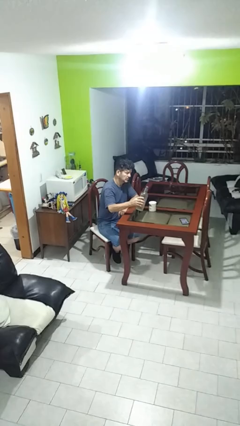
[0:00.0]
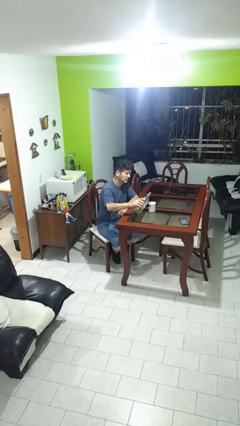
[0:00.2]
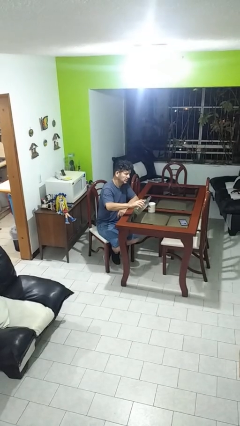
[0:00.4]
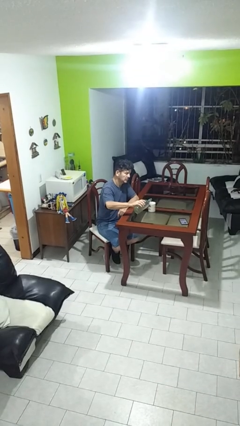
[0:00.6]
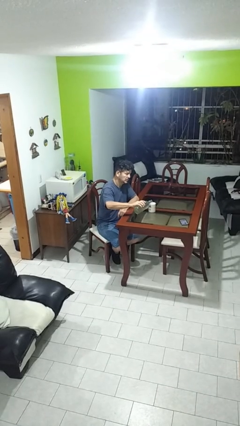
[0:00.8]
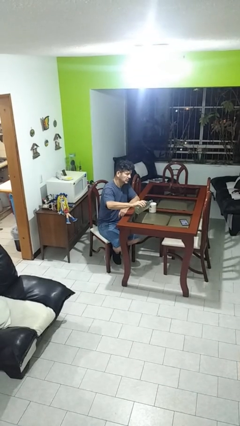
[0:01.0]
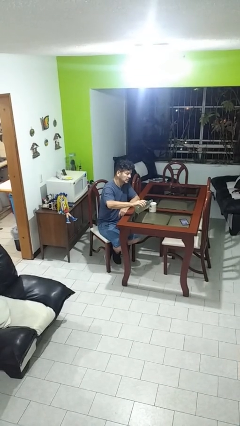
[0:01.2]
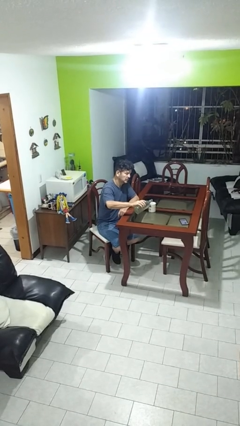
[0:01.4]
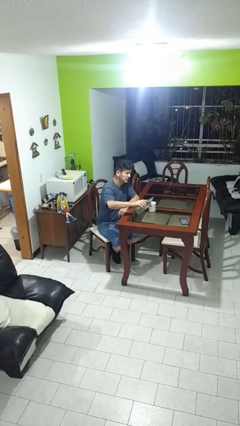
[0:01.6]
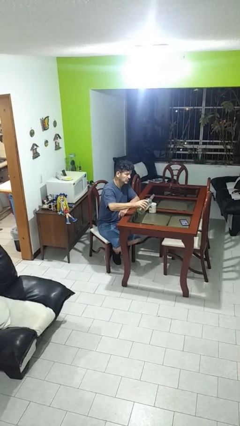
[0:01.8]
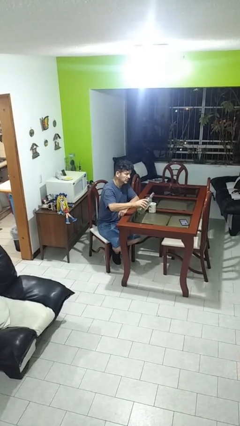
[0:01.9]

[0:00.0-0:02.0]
person pours liquid into cup

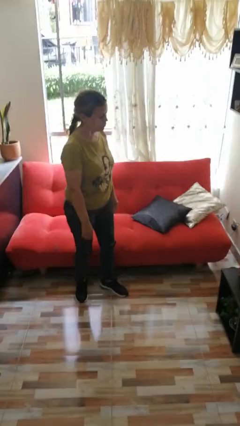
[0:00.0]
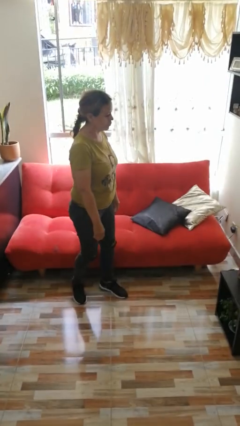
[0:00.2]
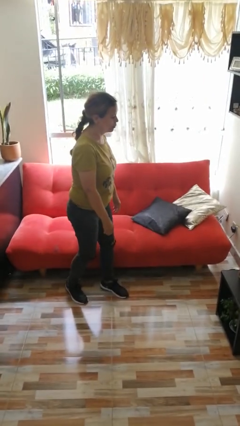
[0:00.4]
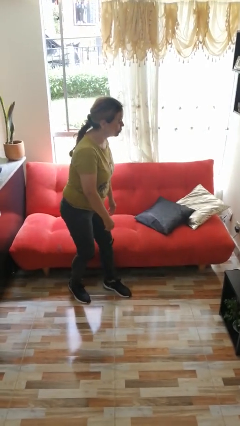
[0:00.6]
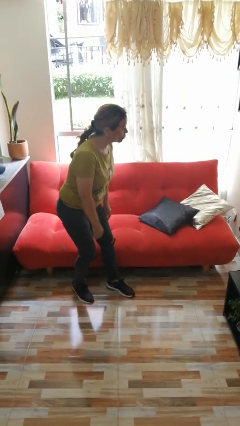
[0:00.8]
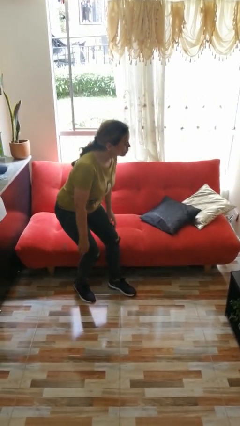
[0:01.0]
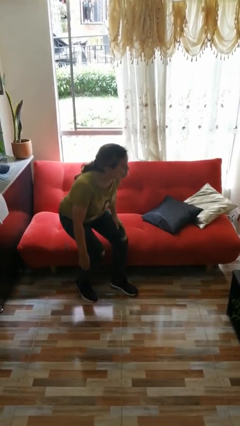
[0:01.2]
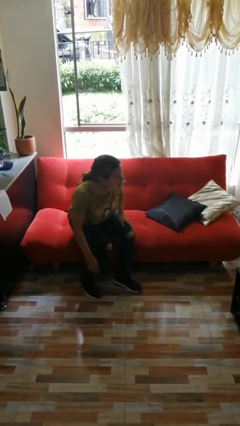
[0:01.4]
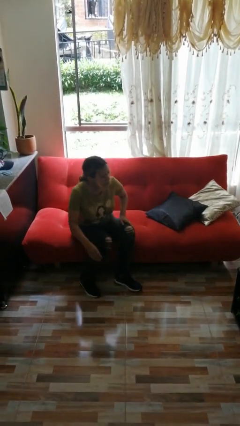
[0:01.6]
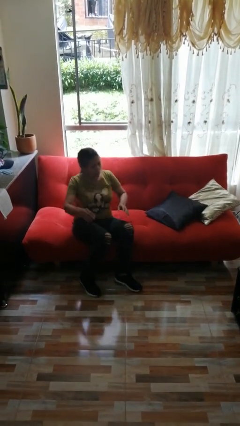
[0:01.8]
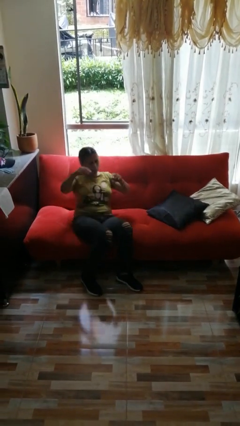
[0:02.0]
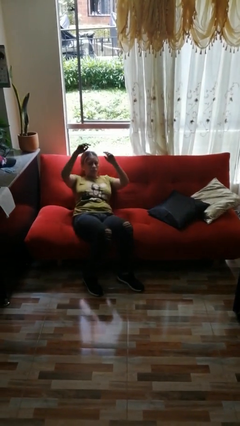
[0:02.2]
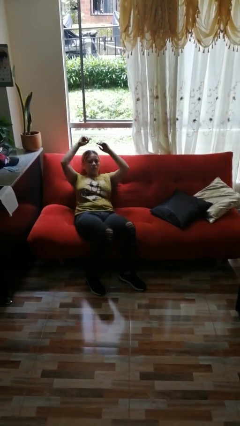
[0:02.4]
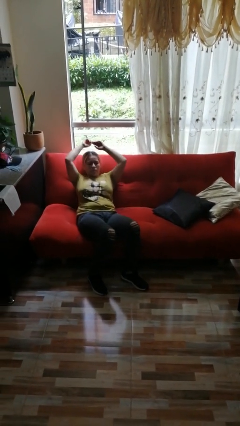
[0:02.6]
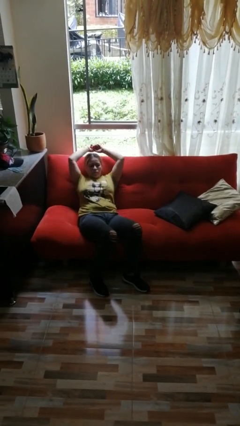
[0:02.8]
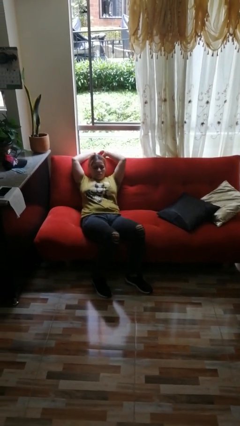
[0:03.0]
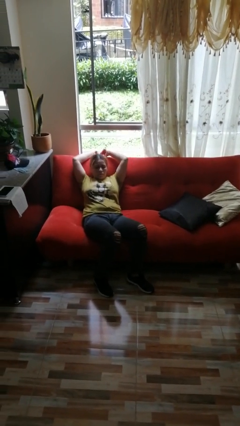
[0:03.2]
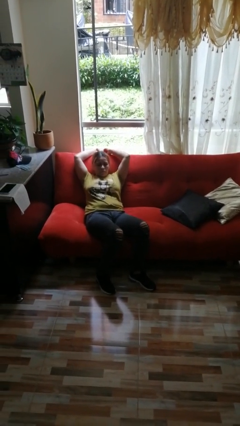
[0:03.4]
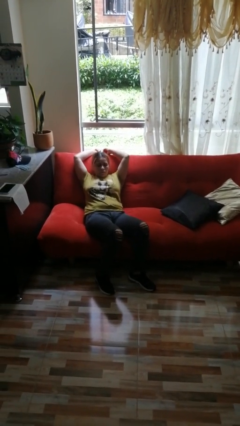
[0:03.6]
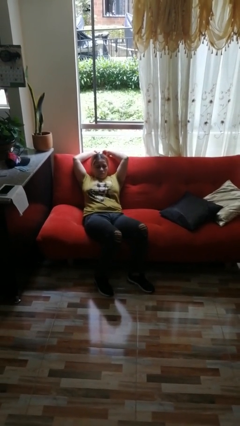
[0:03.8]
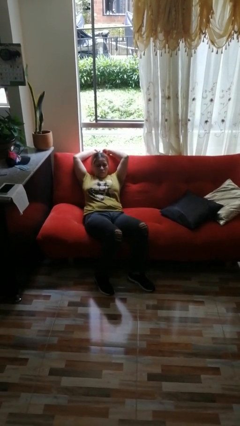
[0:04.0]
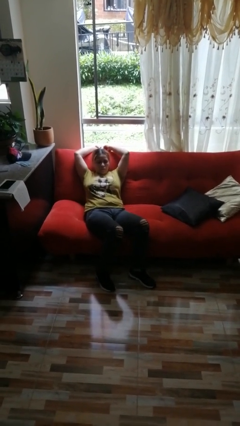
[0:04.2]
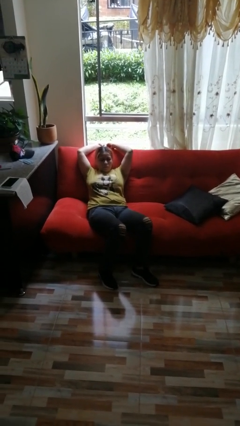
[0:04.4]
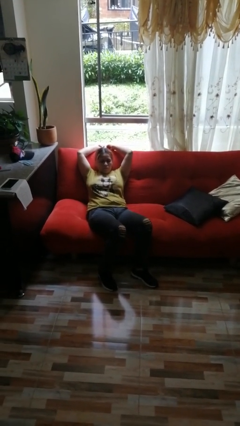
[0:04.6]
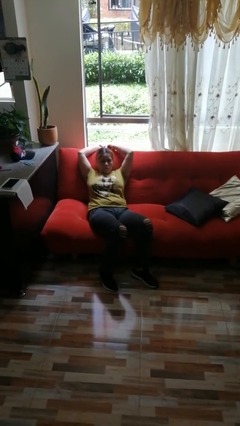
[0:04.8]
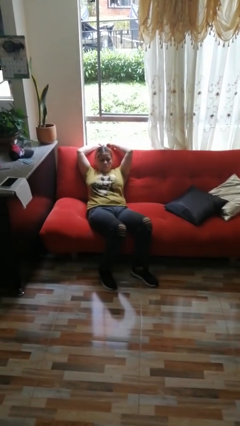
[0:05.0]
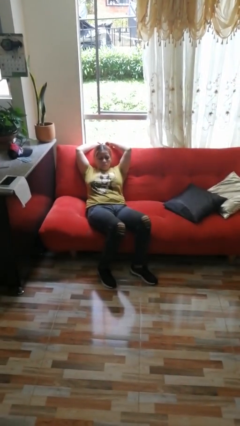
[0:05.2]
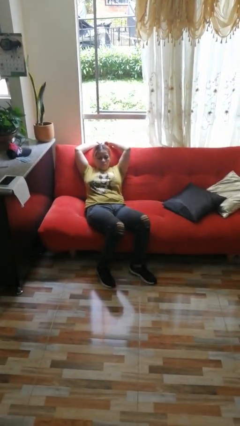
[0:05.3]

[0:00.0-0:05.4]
person lies down on couch

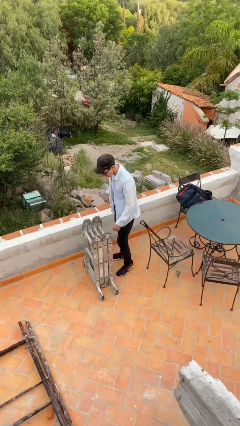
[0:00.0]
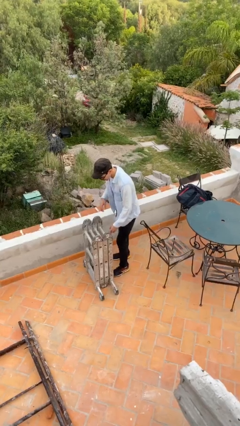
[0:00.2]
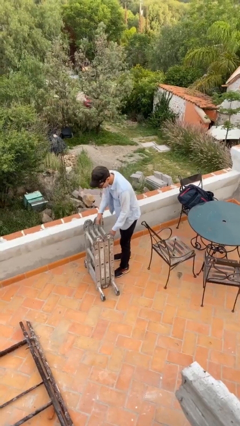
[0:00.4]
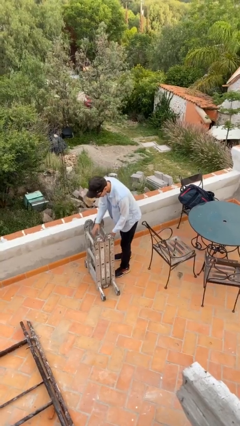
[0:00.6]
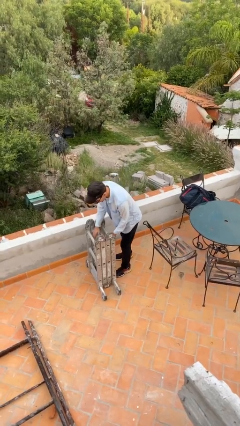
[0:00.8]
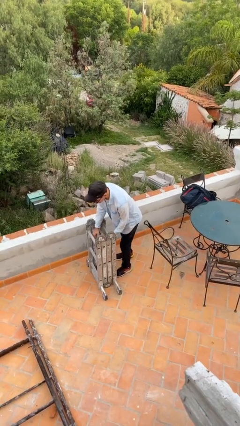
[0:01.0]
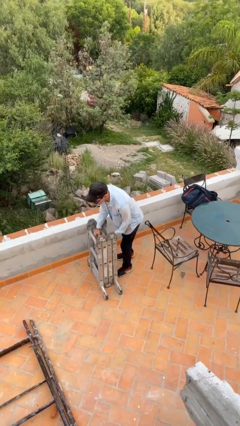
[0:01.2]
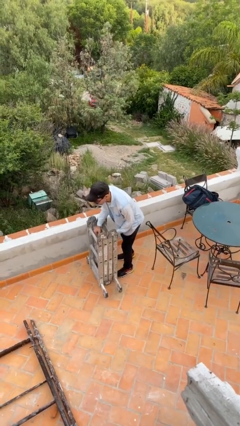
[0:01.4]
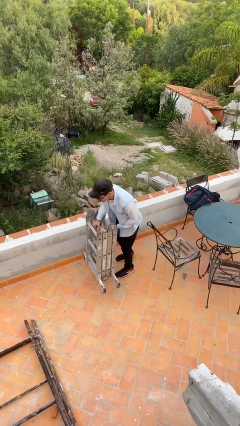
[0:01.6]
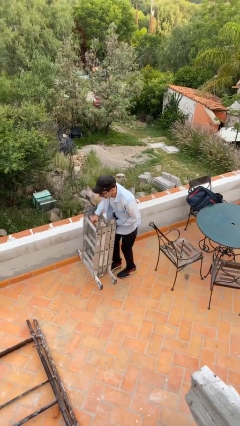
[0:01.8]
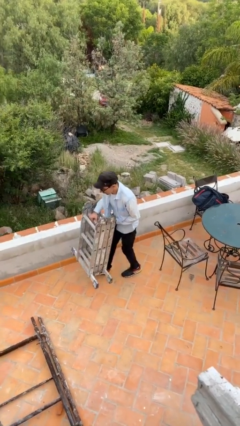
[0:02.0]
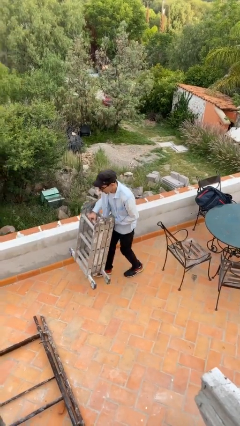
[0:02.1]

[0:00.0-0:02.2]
person picks up object from floor

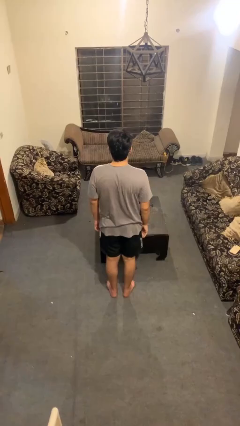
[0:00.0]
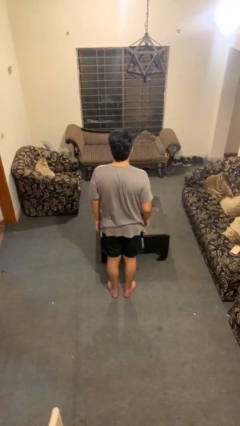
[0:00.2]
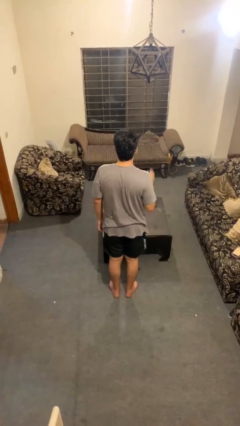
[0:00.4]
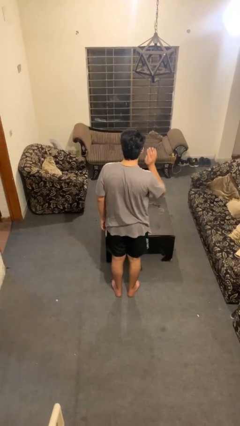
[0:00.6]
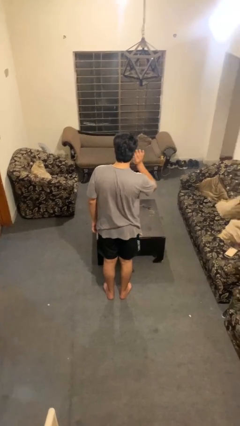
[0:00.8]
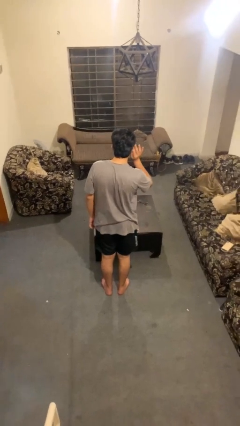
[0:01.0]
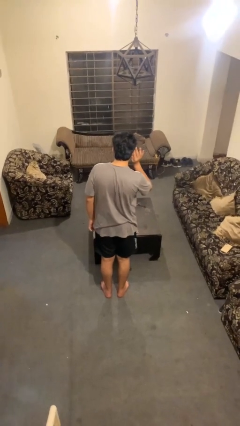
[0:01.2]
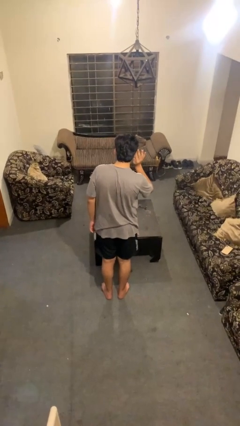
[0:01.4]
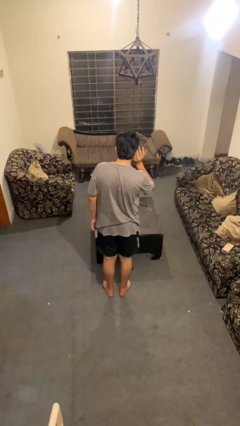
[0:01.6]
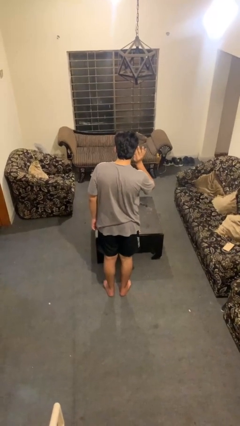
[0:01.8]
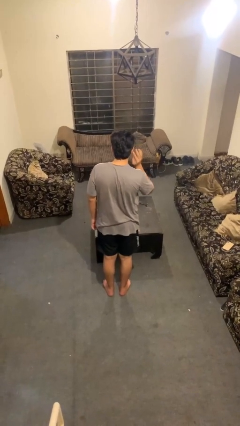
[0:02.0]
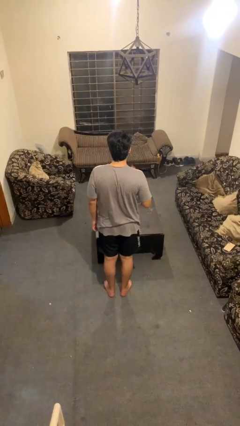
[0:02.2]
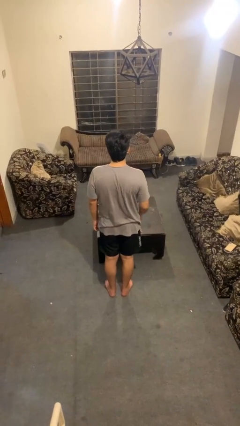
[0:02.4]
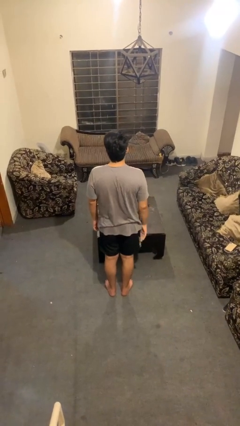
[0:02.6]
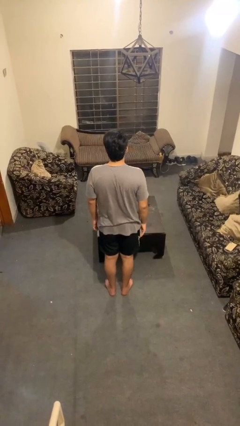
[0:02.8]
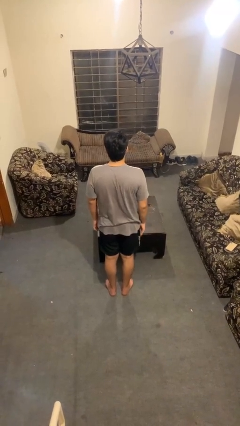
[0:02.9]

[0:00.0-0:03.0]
person gestures listen closely

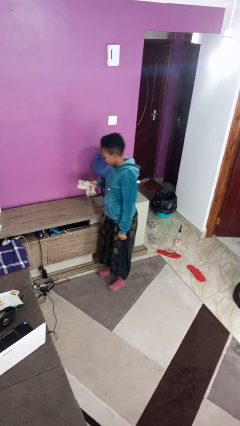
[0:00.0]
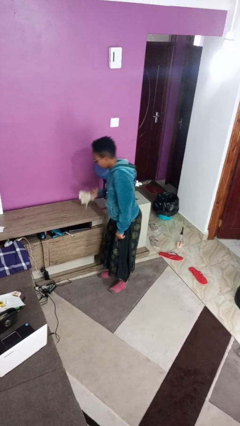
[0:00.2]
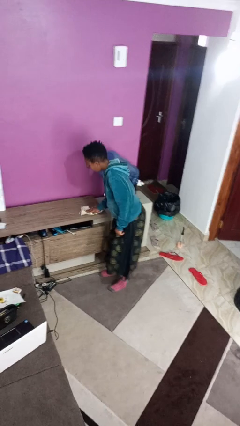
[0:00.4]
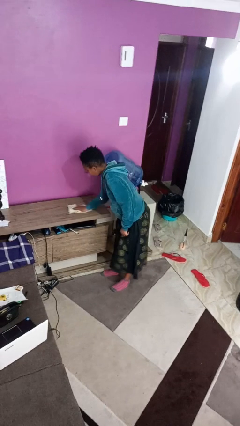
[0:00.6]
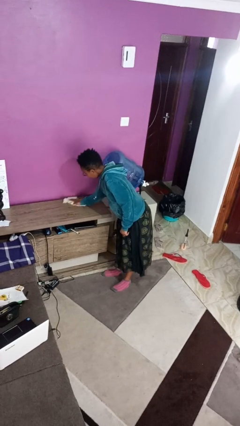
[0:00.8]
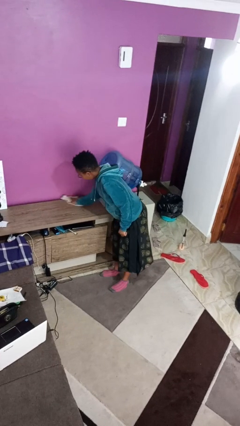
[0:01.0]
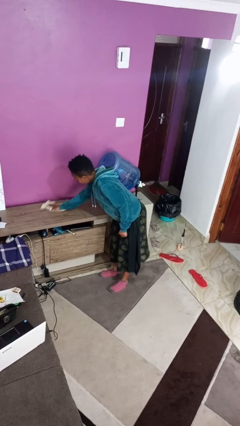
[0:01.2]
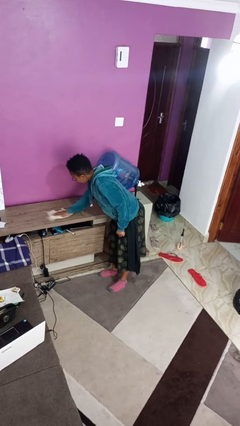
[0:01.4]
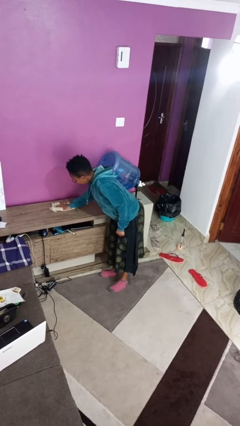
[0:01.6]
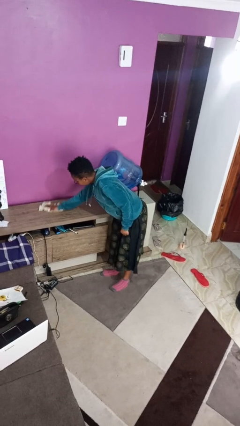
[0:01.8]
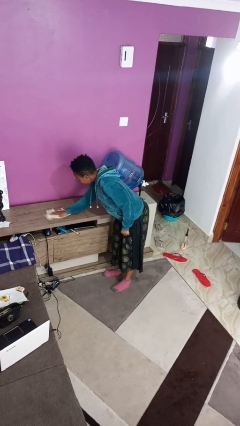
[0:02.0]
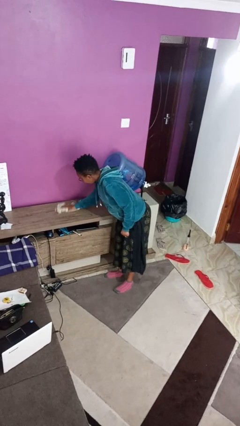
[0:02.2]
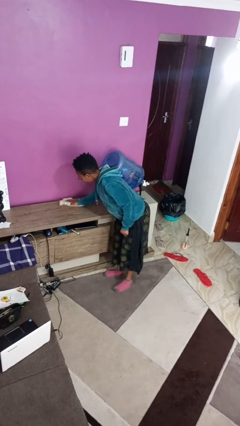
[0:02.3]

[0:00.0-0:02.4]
person cleans table with rag

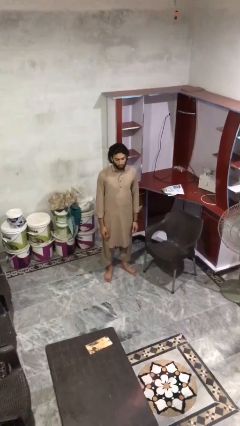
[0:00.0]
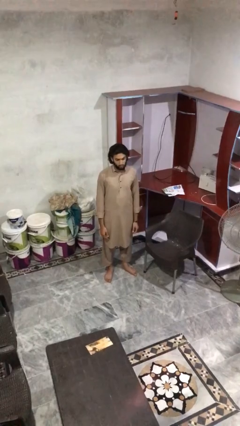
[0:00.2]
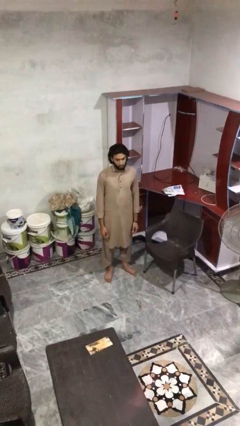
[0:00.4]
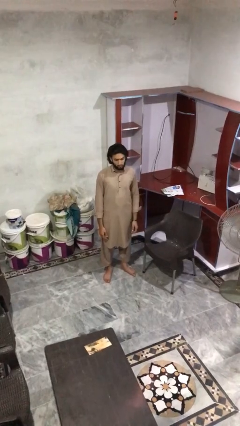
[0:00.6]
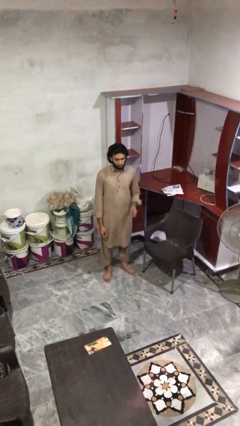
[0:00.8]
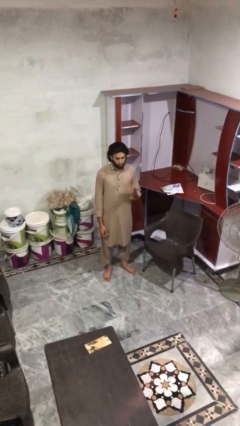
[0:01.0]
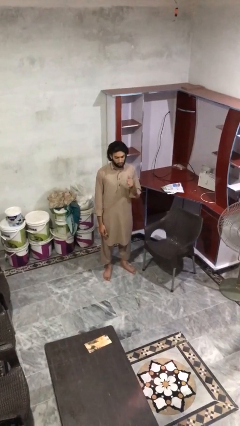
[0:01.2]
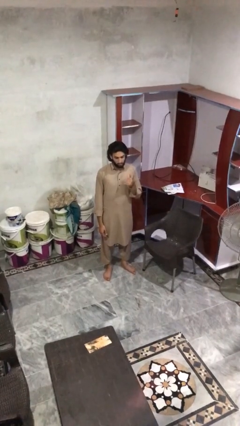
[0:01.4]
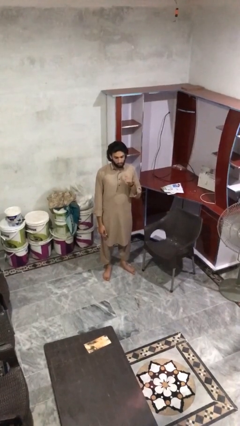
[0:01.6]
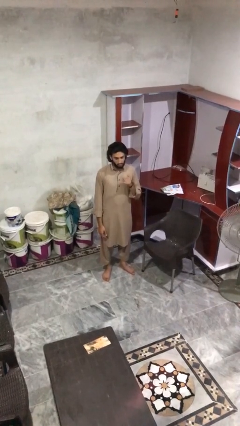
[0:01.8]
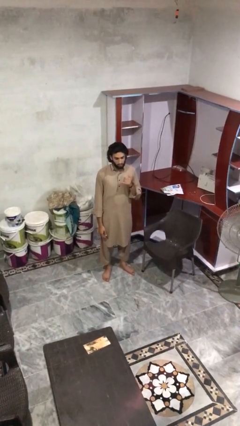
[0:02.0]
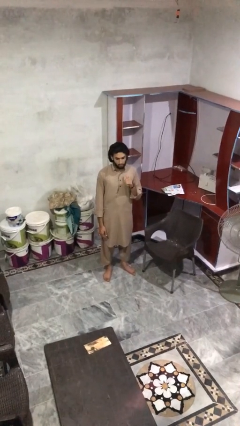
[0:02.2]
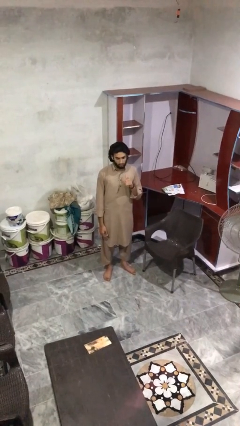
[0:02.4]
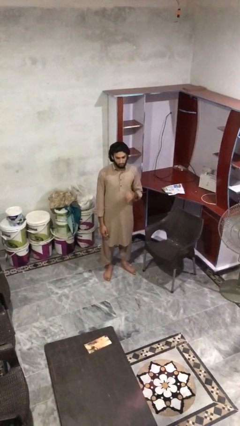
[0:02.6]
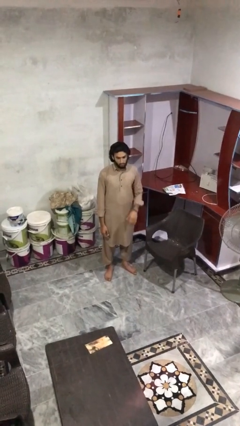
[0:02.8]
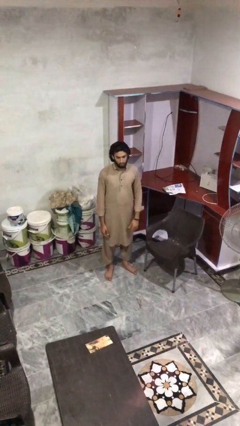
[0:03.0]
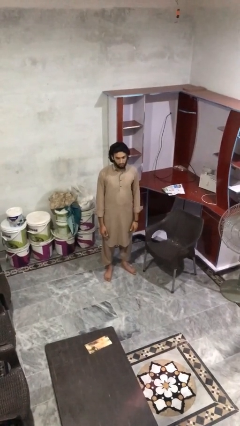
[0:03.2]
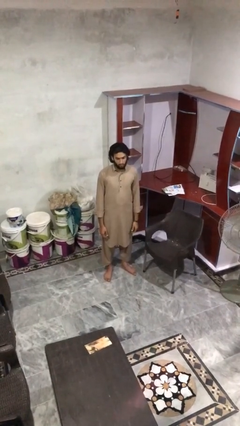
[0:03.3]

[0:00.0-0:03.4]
person gestures hang loose
